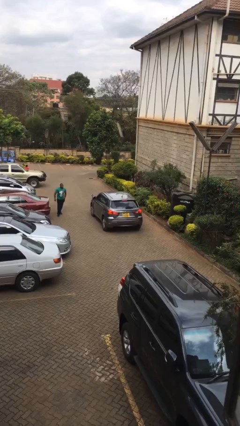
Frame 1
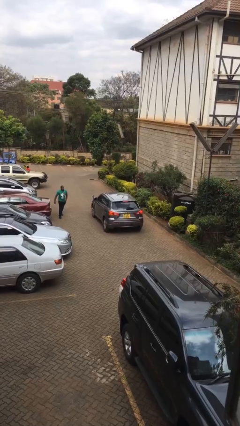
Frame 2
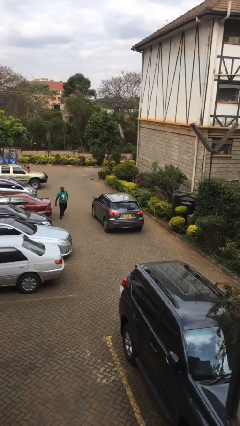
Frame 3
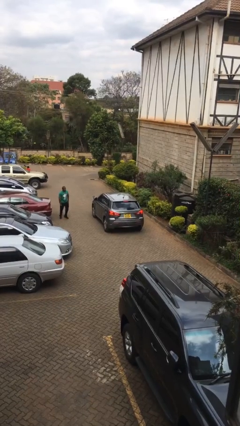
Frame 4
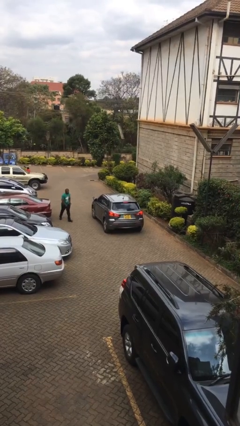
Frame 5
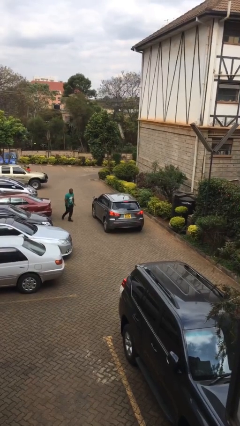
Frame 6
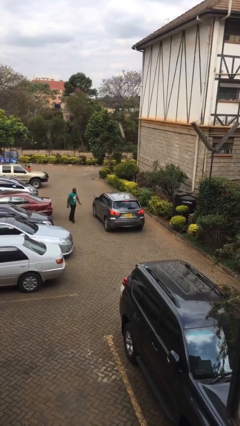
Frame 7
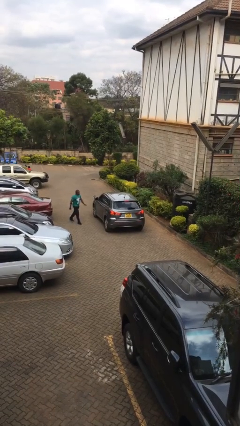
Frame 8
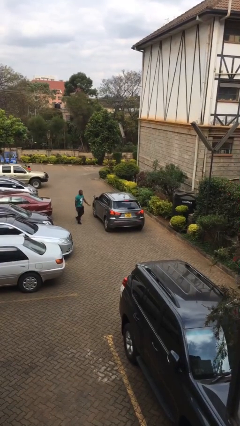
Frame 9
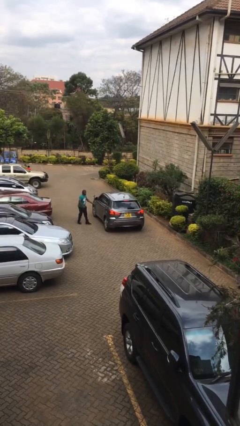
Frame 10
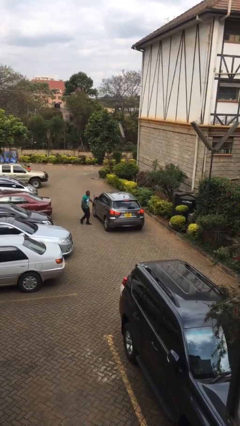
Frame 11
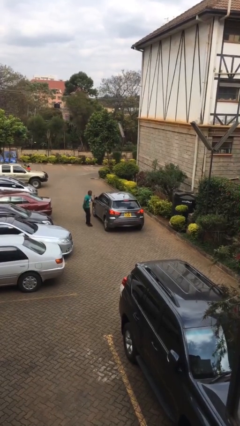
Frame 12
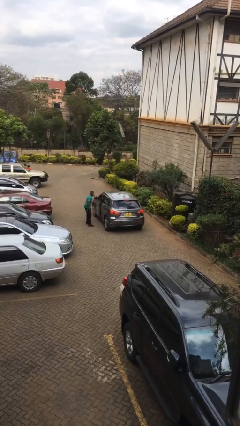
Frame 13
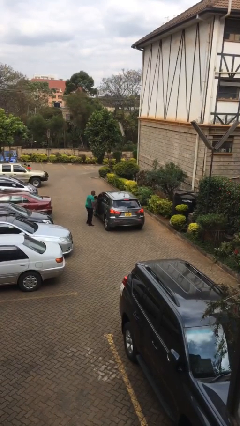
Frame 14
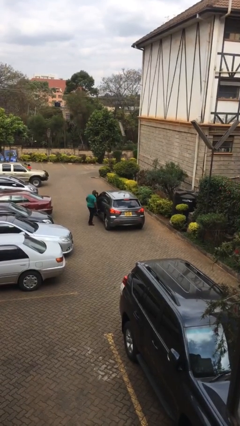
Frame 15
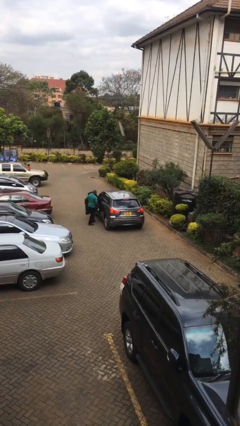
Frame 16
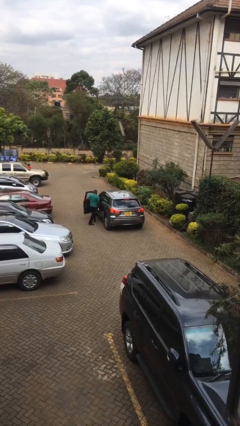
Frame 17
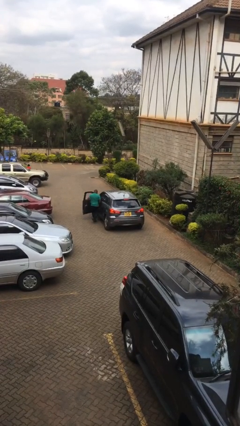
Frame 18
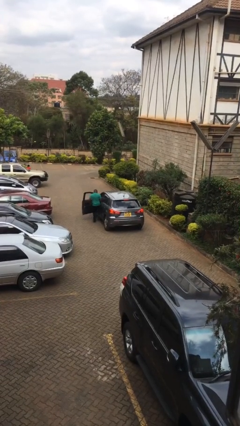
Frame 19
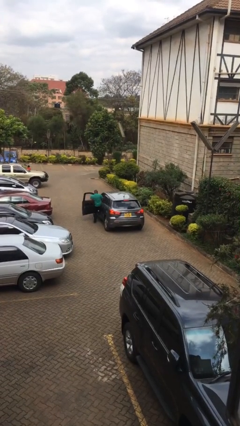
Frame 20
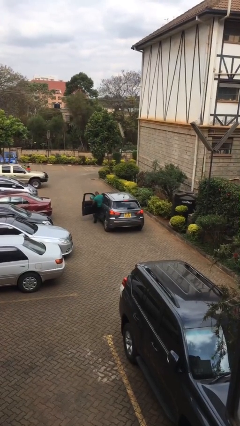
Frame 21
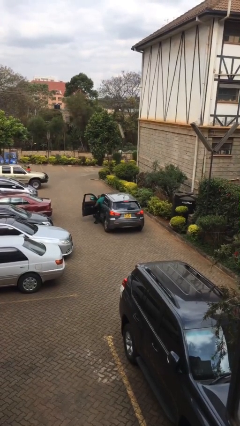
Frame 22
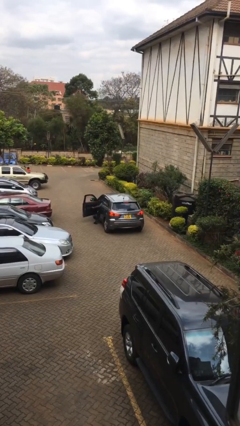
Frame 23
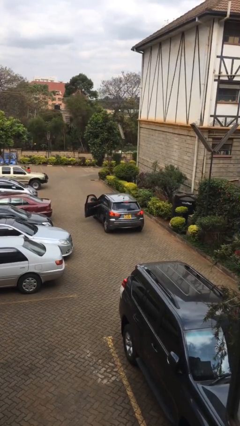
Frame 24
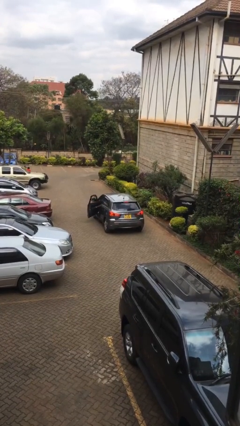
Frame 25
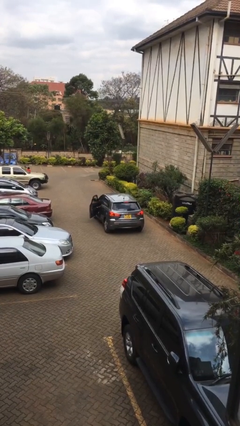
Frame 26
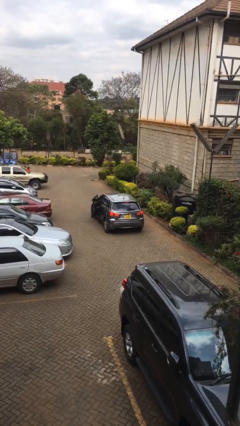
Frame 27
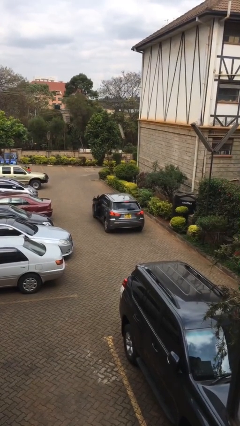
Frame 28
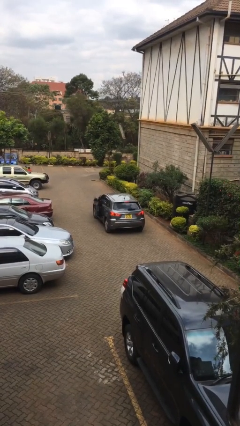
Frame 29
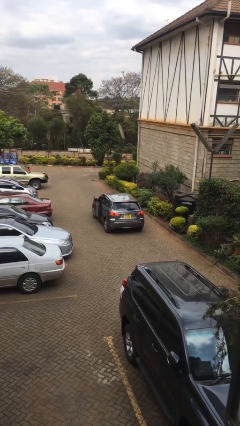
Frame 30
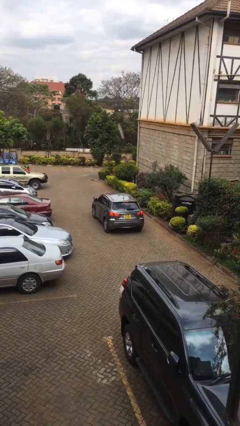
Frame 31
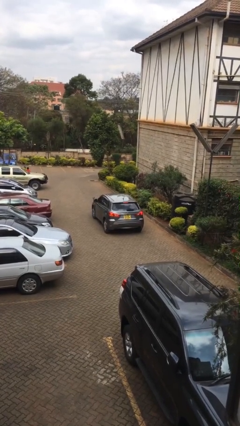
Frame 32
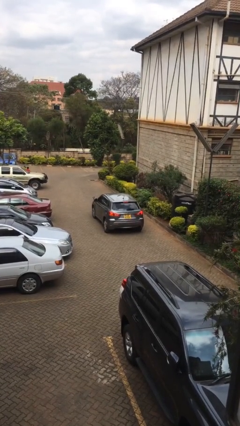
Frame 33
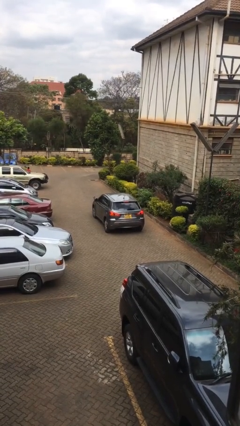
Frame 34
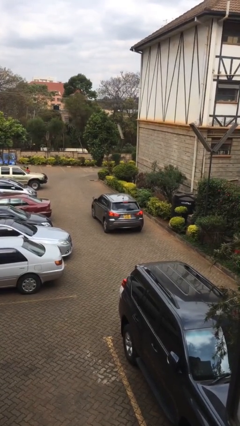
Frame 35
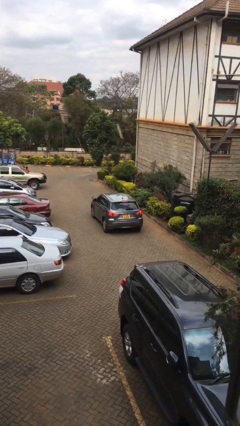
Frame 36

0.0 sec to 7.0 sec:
car picks up person

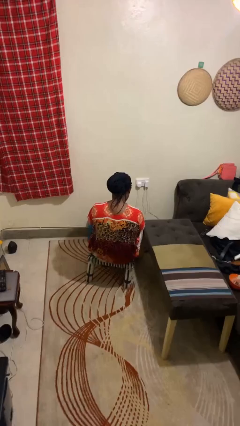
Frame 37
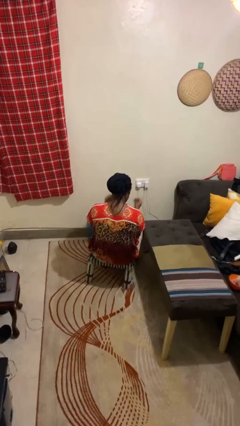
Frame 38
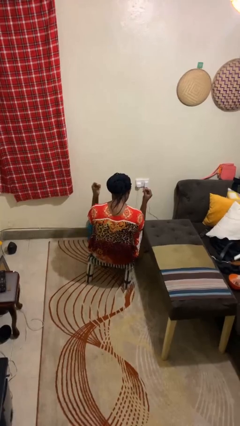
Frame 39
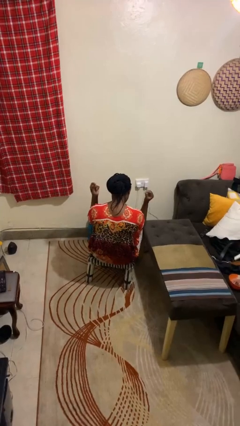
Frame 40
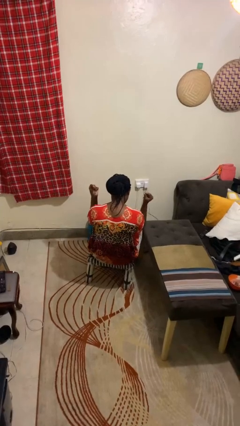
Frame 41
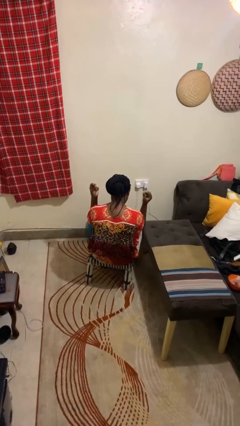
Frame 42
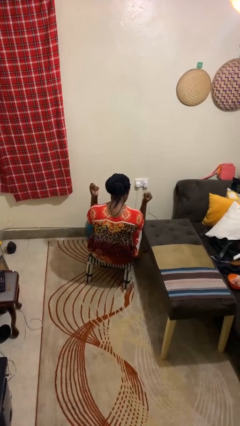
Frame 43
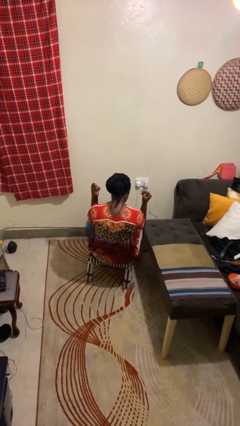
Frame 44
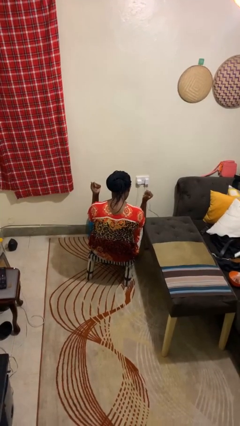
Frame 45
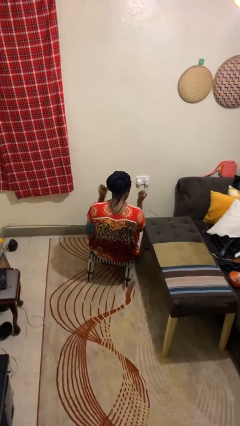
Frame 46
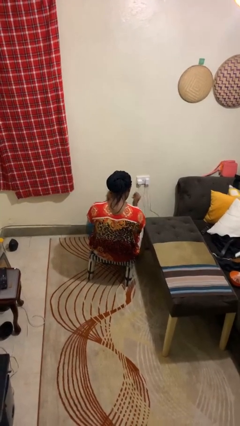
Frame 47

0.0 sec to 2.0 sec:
person snaps fingers

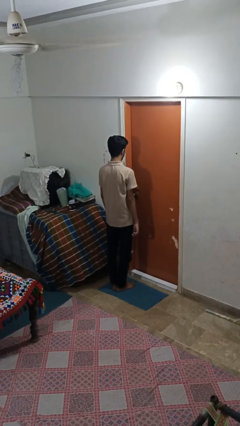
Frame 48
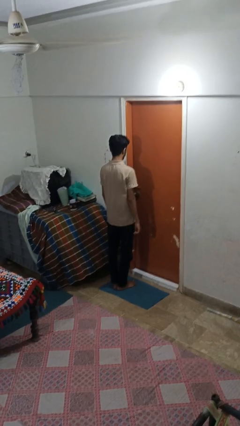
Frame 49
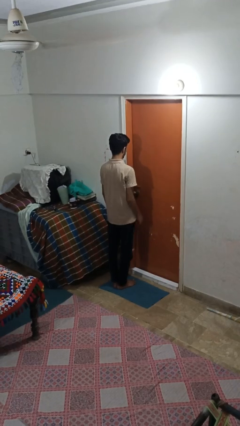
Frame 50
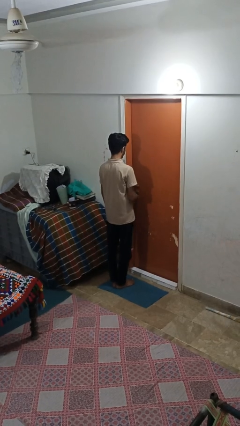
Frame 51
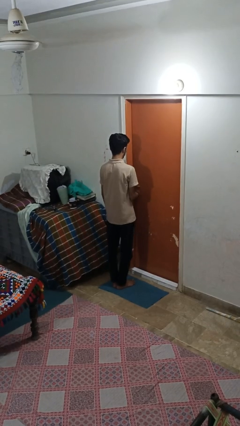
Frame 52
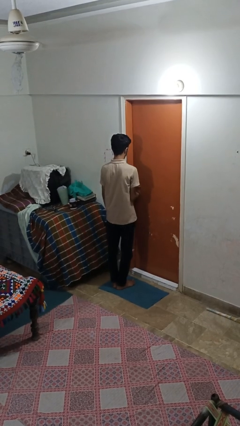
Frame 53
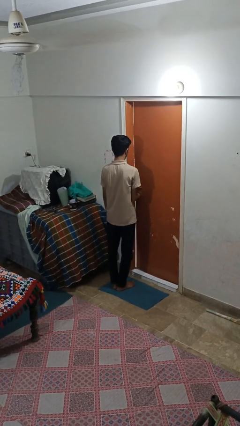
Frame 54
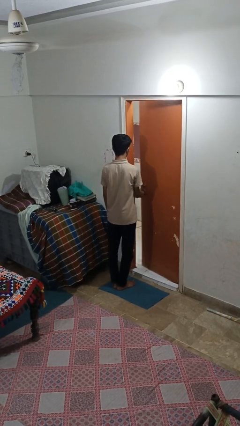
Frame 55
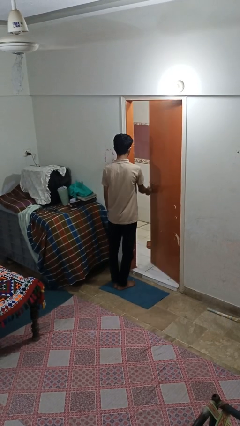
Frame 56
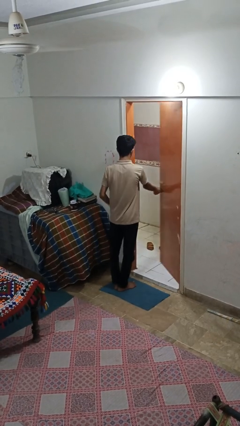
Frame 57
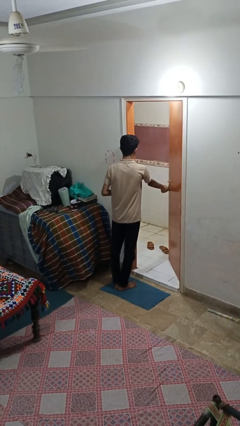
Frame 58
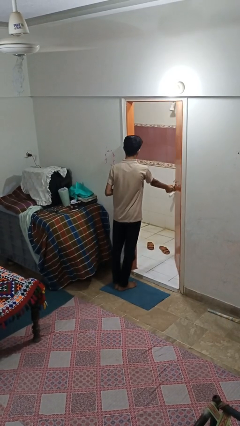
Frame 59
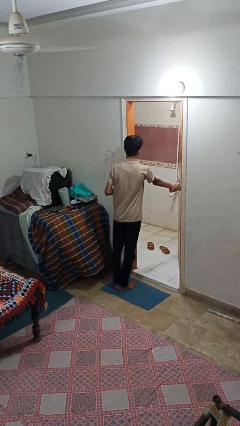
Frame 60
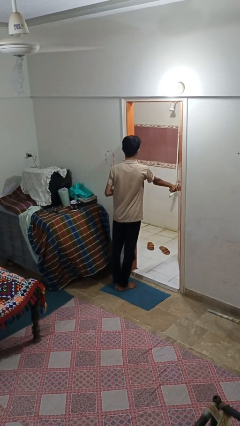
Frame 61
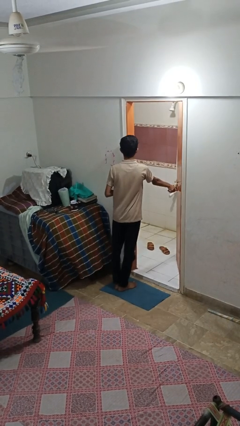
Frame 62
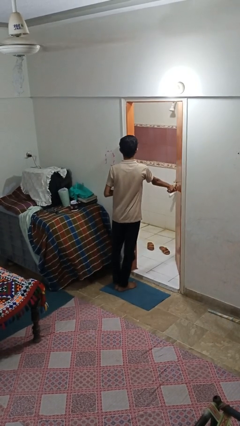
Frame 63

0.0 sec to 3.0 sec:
person opens facility door

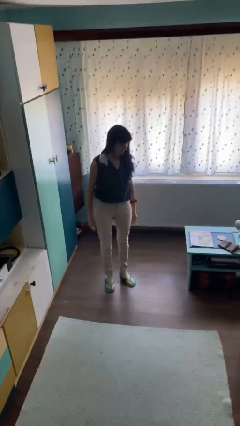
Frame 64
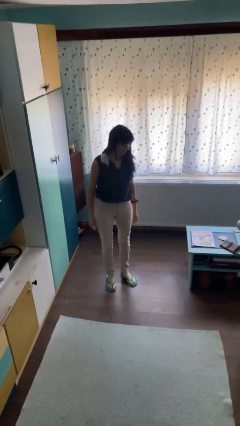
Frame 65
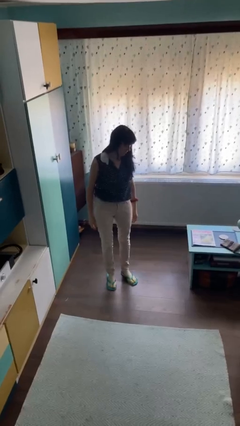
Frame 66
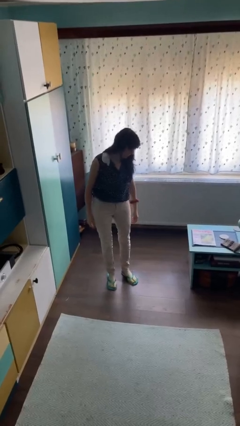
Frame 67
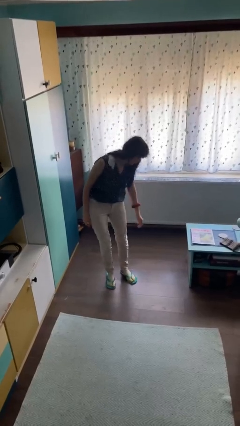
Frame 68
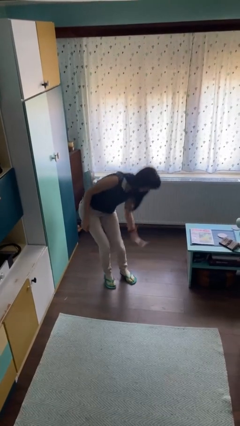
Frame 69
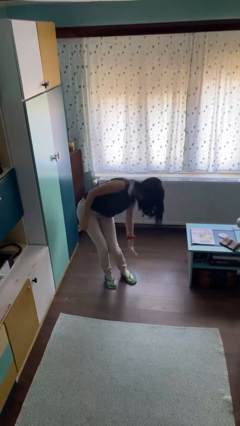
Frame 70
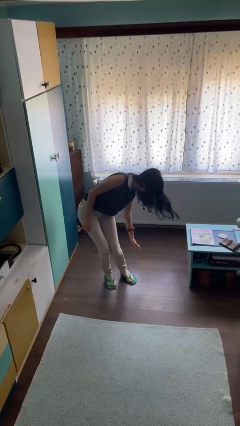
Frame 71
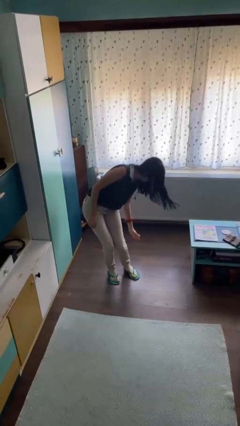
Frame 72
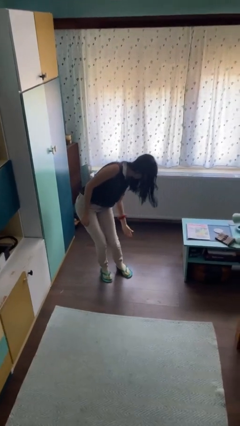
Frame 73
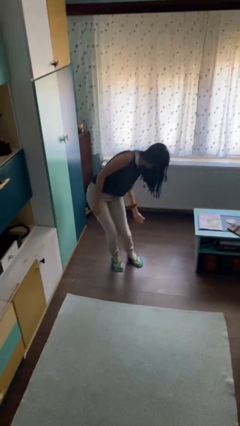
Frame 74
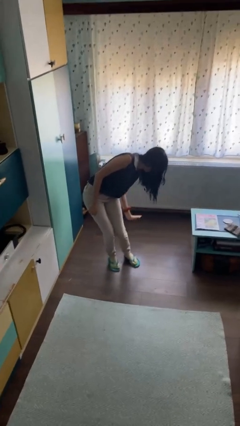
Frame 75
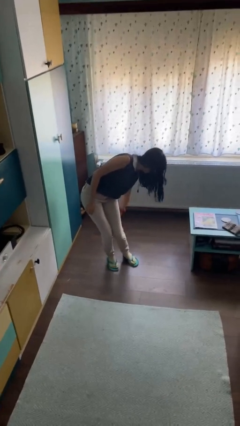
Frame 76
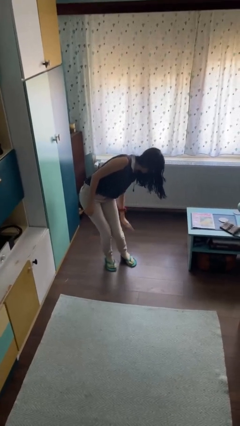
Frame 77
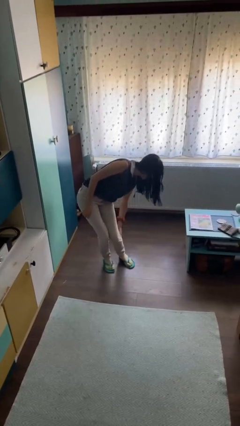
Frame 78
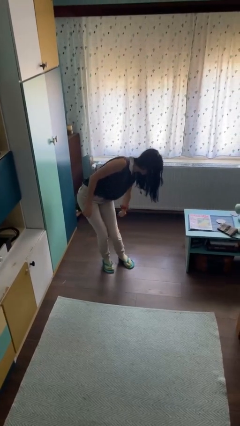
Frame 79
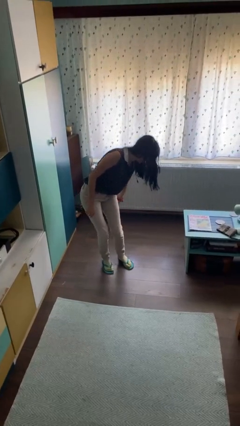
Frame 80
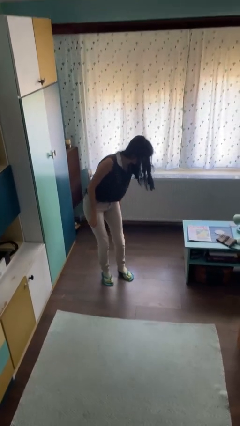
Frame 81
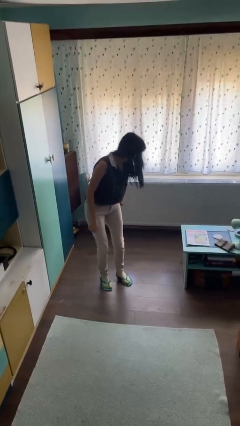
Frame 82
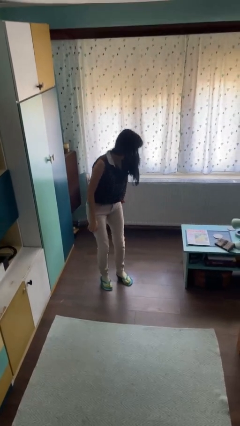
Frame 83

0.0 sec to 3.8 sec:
person swats bug

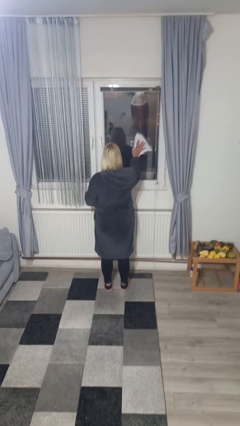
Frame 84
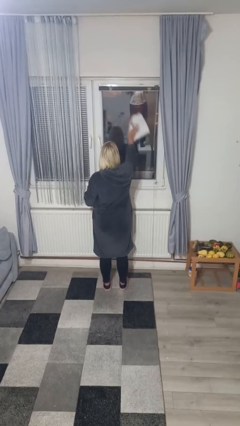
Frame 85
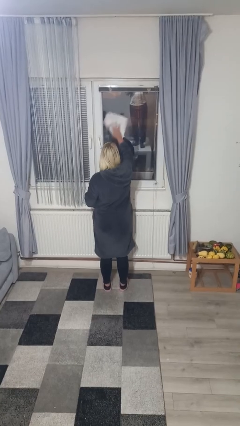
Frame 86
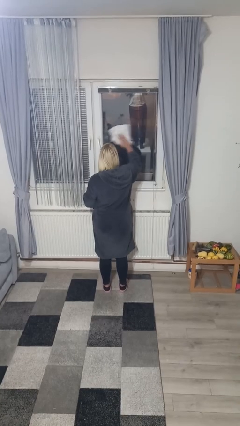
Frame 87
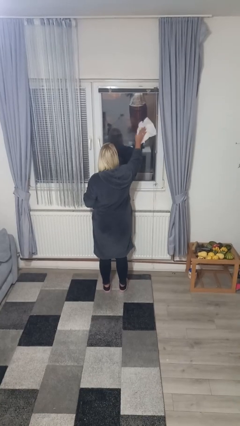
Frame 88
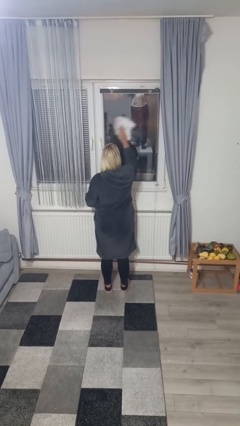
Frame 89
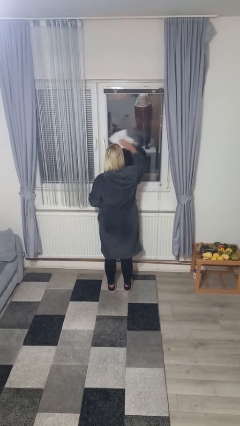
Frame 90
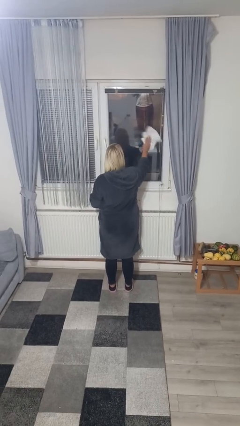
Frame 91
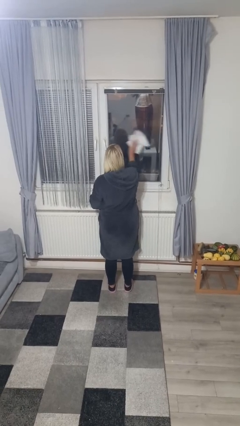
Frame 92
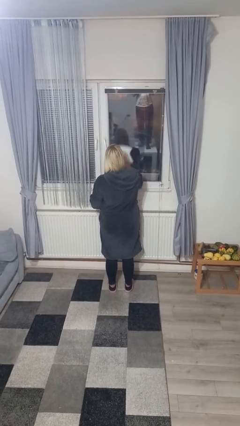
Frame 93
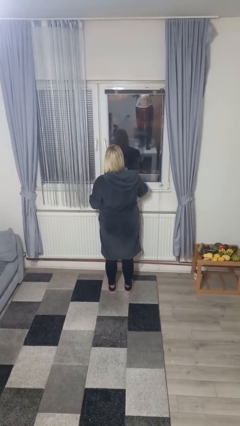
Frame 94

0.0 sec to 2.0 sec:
person washes window
